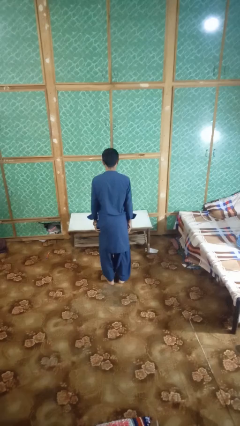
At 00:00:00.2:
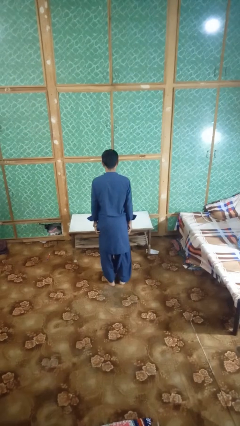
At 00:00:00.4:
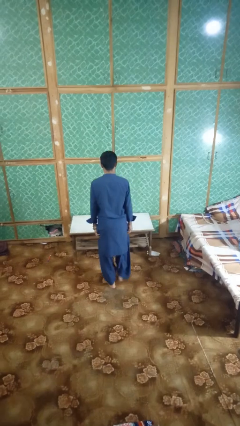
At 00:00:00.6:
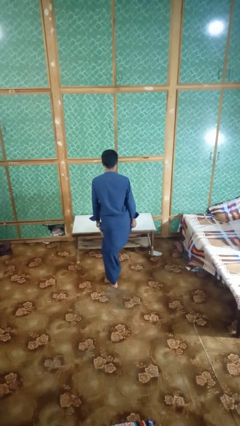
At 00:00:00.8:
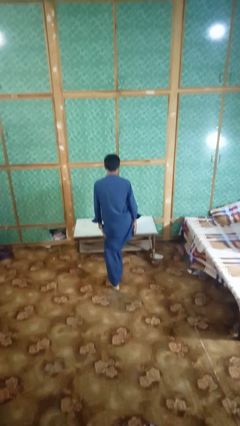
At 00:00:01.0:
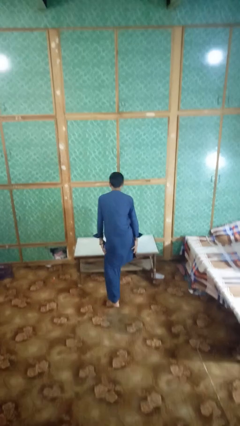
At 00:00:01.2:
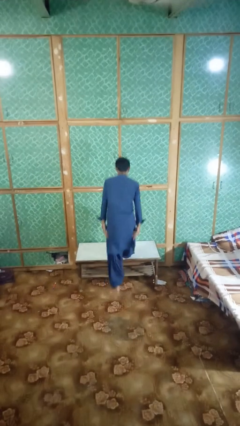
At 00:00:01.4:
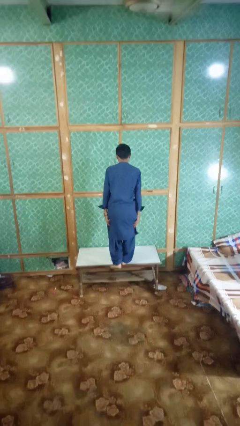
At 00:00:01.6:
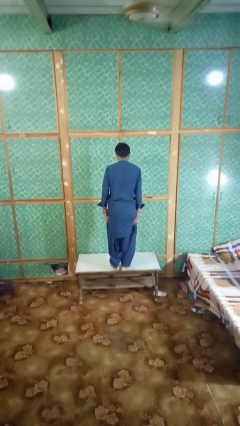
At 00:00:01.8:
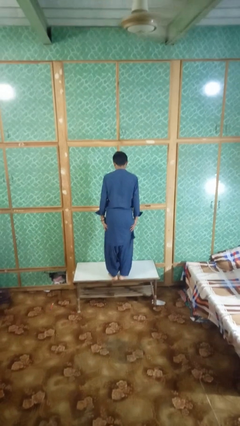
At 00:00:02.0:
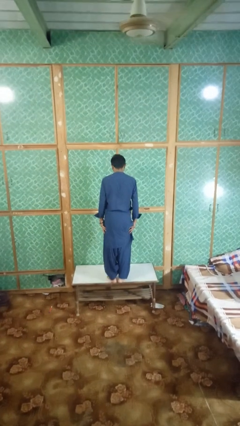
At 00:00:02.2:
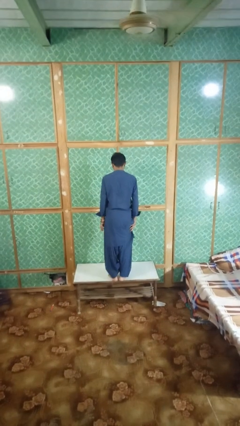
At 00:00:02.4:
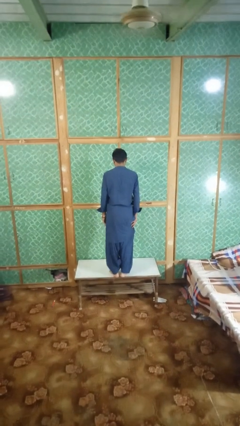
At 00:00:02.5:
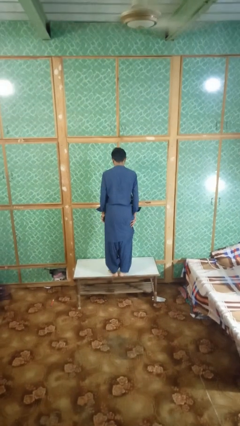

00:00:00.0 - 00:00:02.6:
person climbs on table

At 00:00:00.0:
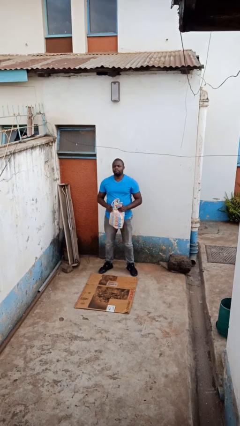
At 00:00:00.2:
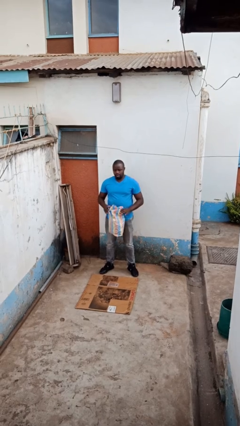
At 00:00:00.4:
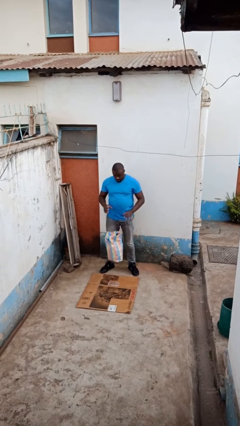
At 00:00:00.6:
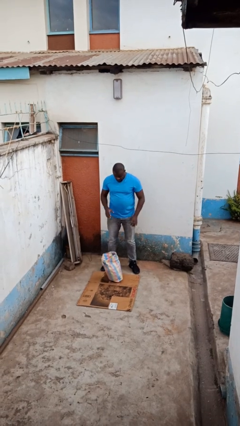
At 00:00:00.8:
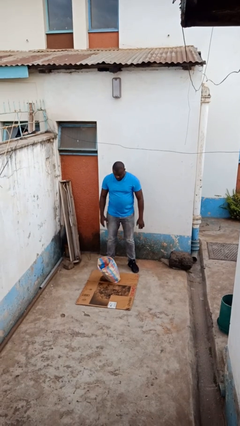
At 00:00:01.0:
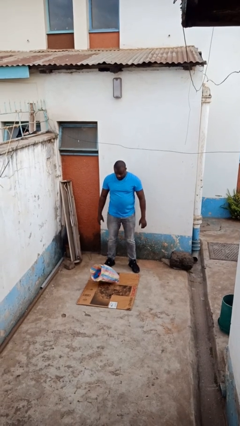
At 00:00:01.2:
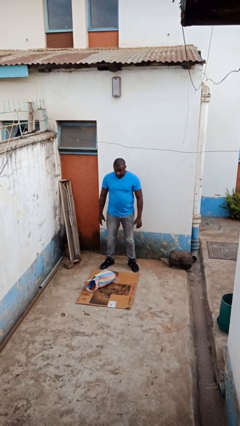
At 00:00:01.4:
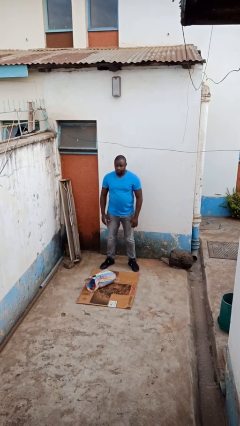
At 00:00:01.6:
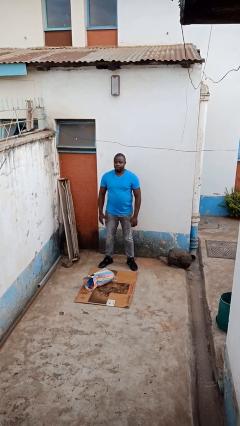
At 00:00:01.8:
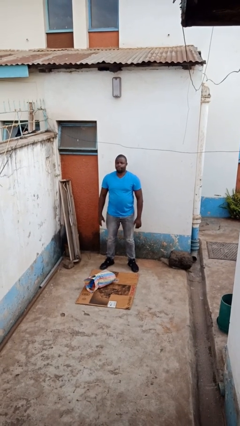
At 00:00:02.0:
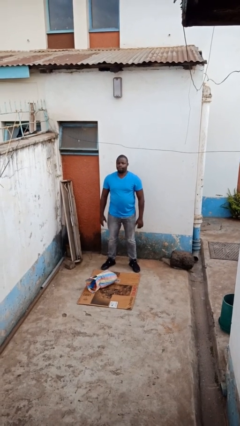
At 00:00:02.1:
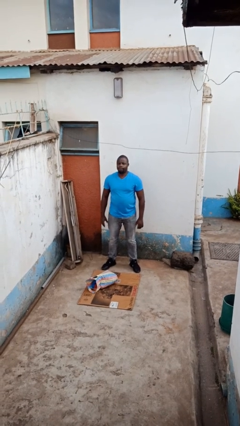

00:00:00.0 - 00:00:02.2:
person drops object

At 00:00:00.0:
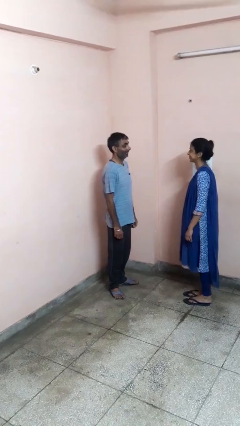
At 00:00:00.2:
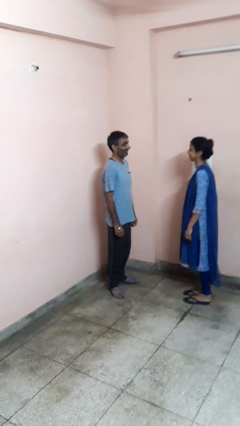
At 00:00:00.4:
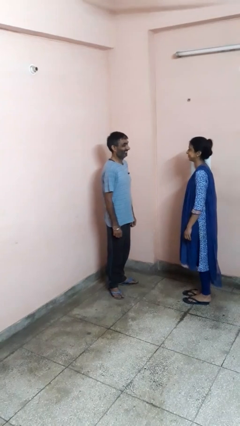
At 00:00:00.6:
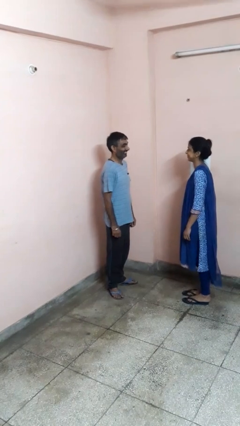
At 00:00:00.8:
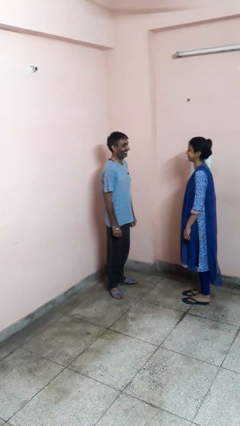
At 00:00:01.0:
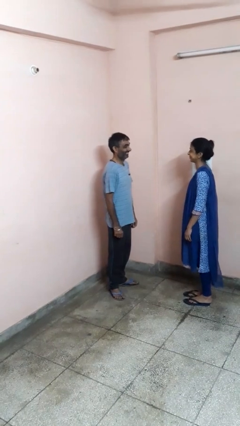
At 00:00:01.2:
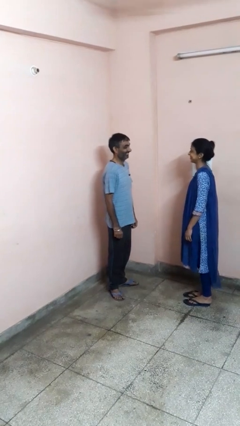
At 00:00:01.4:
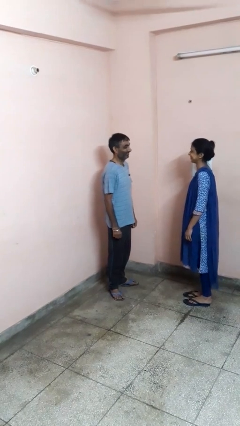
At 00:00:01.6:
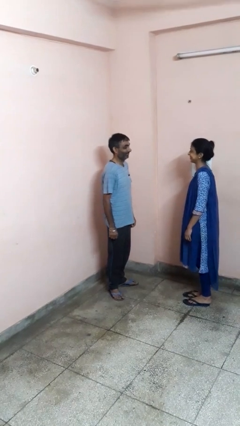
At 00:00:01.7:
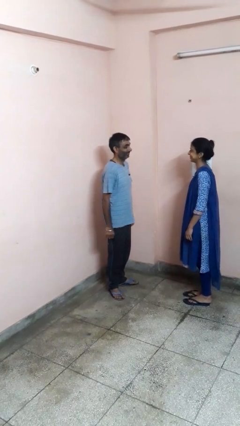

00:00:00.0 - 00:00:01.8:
person laughs with person

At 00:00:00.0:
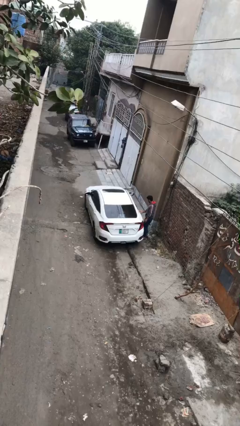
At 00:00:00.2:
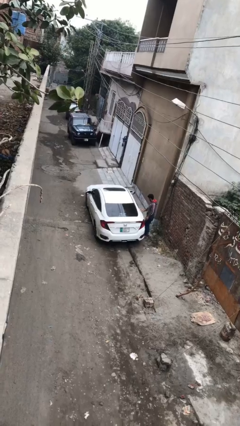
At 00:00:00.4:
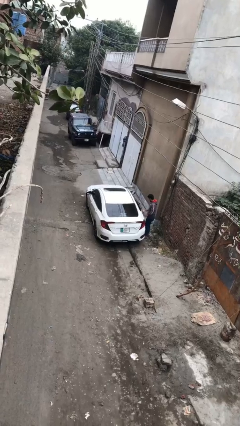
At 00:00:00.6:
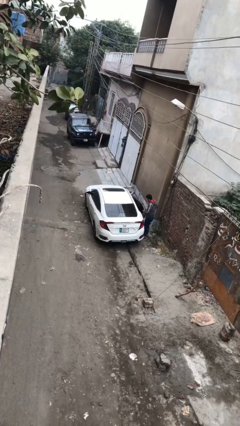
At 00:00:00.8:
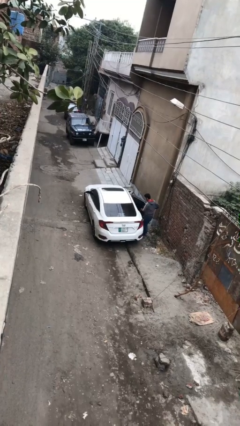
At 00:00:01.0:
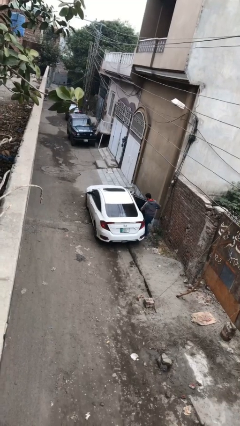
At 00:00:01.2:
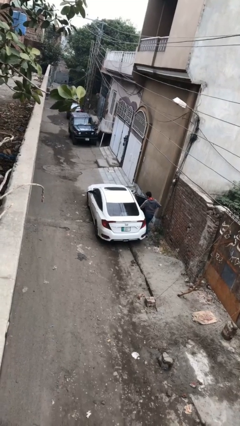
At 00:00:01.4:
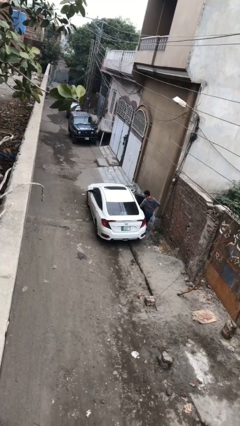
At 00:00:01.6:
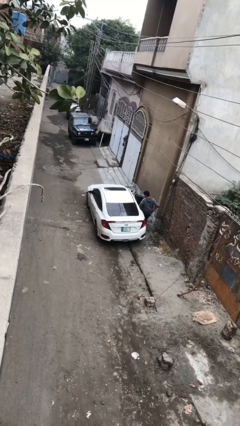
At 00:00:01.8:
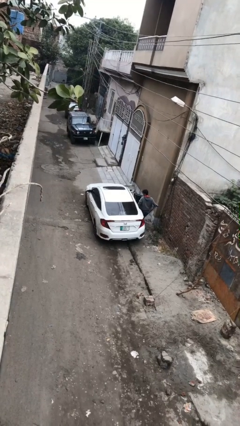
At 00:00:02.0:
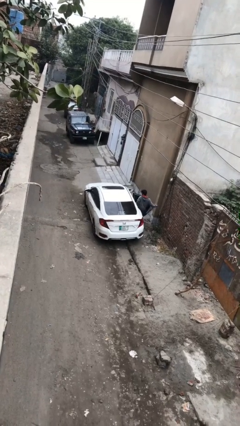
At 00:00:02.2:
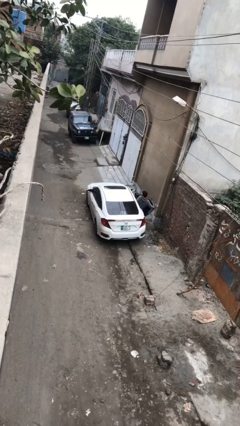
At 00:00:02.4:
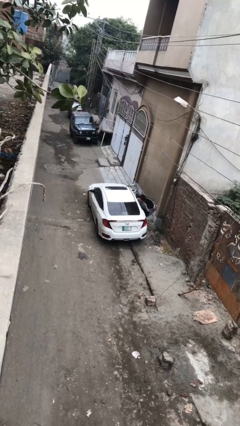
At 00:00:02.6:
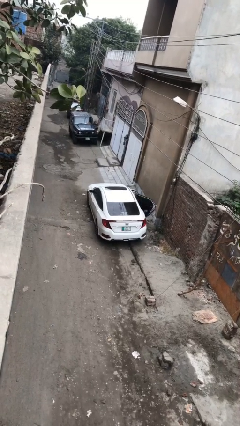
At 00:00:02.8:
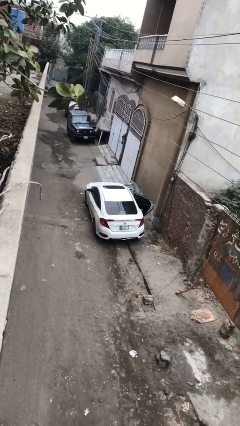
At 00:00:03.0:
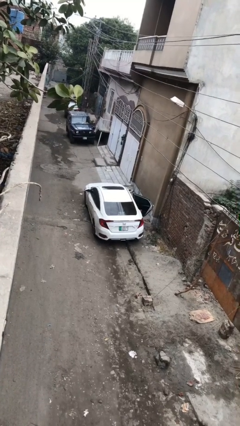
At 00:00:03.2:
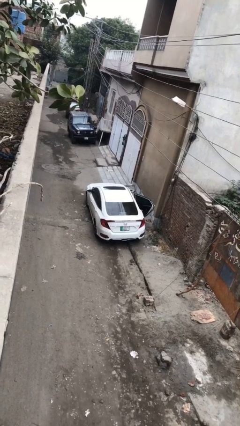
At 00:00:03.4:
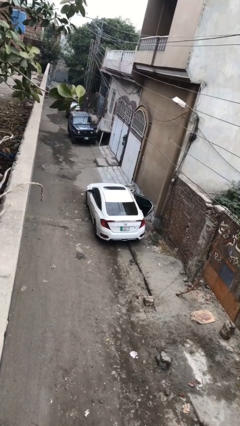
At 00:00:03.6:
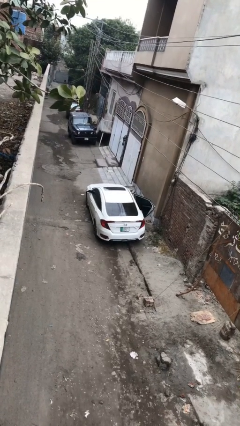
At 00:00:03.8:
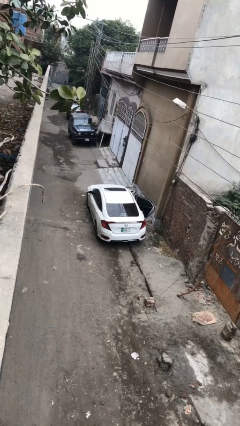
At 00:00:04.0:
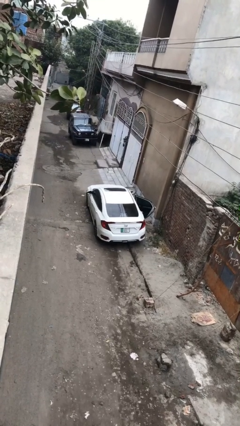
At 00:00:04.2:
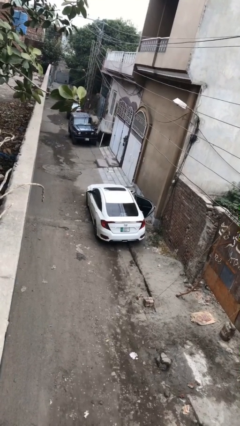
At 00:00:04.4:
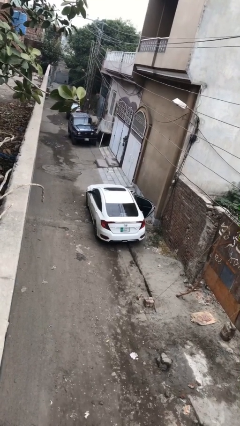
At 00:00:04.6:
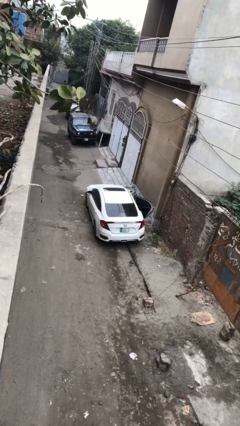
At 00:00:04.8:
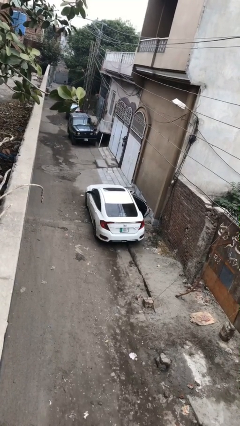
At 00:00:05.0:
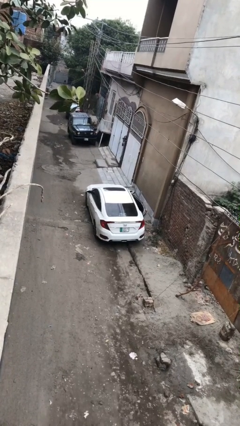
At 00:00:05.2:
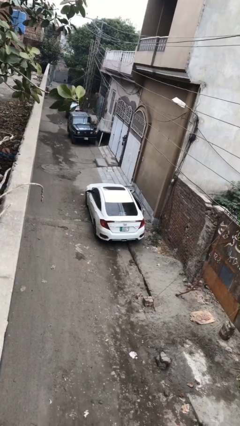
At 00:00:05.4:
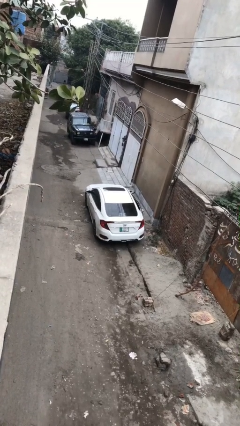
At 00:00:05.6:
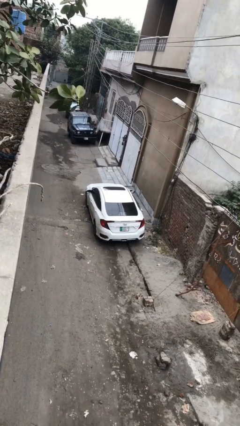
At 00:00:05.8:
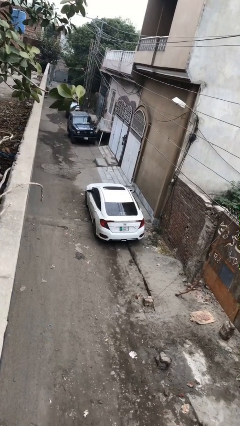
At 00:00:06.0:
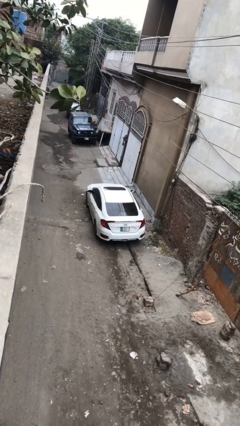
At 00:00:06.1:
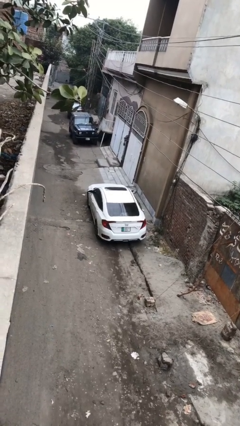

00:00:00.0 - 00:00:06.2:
car picks up person

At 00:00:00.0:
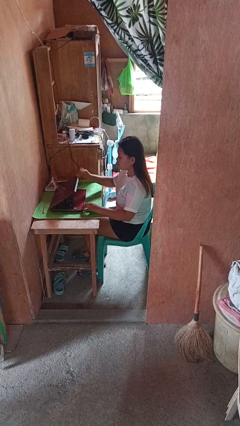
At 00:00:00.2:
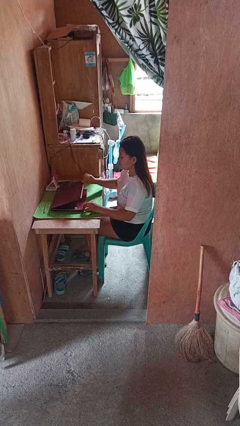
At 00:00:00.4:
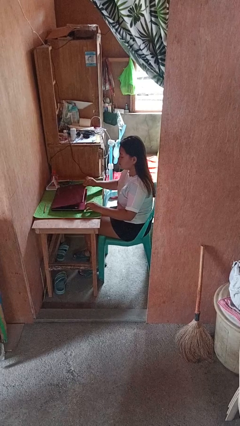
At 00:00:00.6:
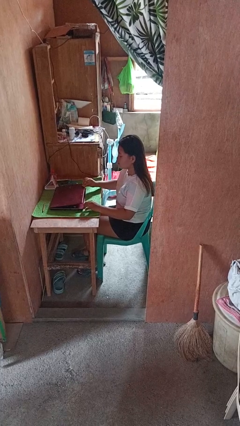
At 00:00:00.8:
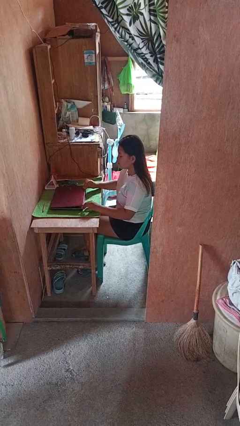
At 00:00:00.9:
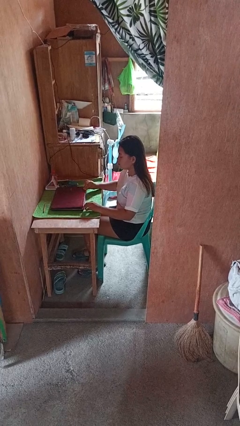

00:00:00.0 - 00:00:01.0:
person closes laptop

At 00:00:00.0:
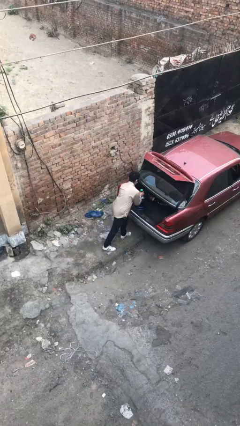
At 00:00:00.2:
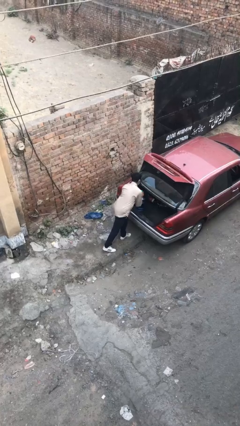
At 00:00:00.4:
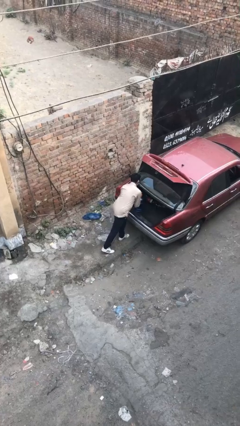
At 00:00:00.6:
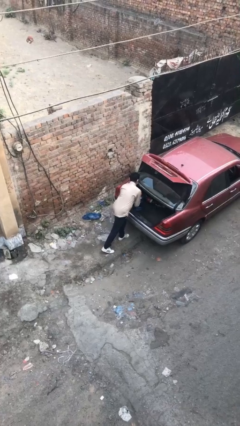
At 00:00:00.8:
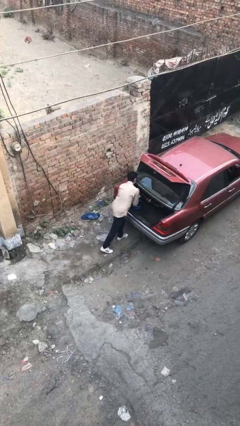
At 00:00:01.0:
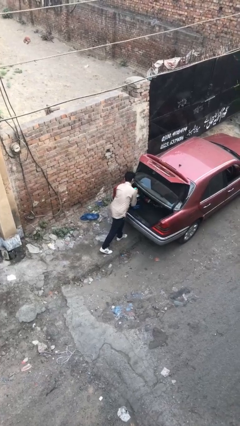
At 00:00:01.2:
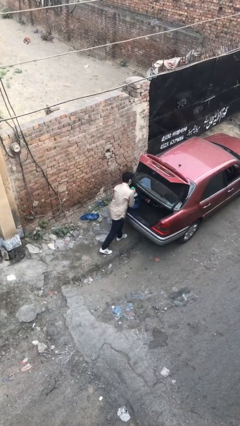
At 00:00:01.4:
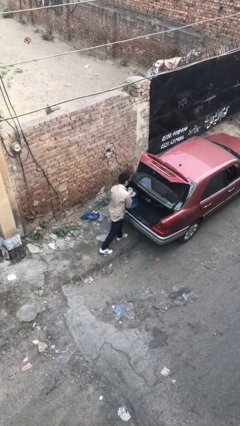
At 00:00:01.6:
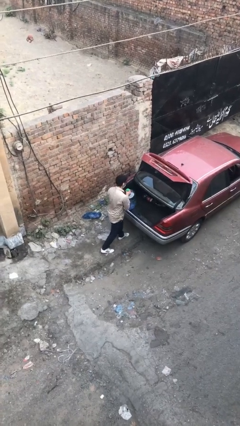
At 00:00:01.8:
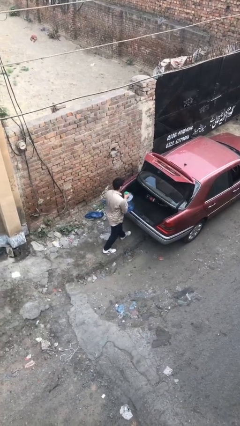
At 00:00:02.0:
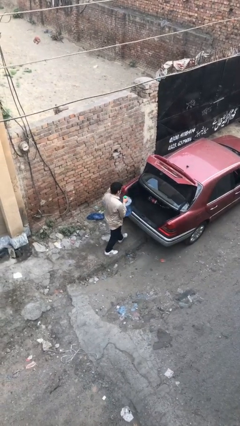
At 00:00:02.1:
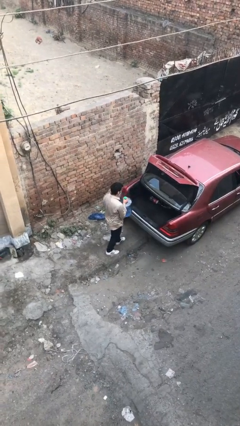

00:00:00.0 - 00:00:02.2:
person unloads car

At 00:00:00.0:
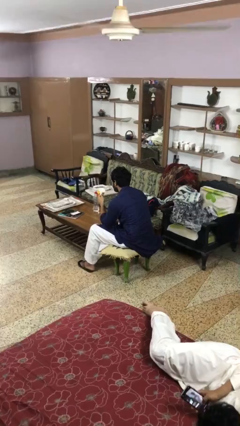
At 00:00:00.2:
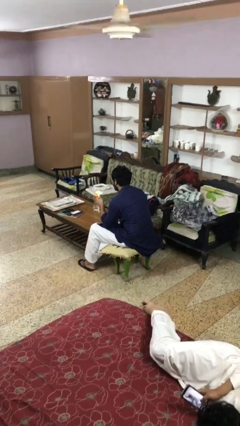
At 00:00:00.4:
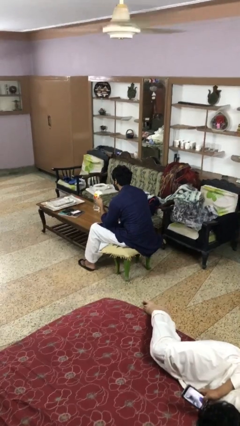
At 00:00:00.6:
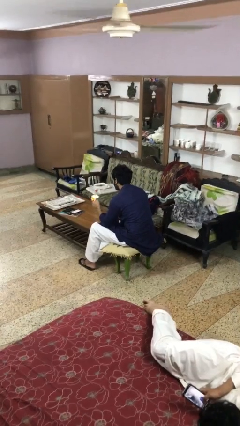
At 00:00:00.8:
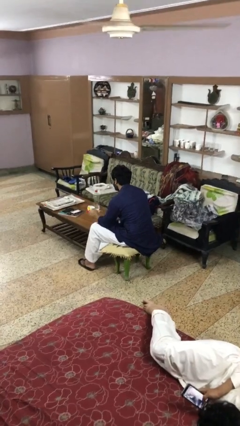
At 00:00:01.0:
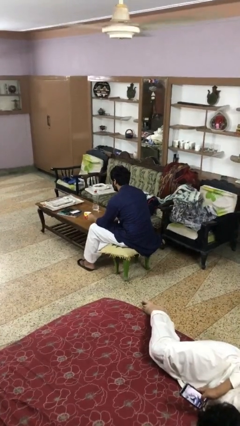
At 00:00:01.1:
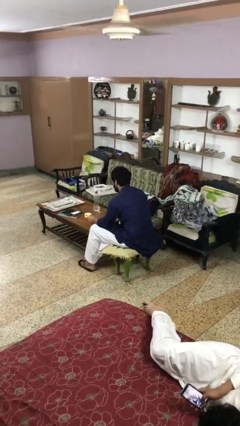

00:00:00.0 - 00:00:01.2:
person puts down object on table
